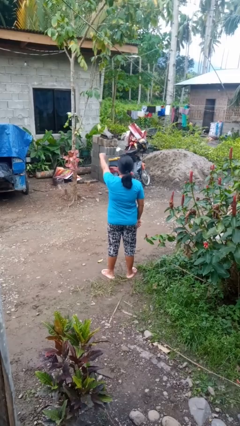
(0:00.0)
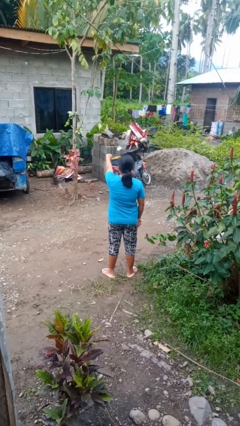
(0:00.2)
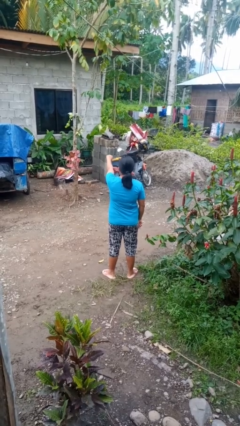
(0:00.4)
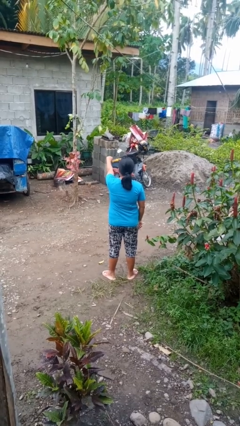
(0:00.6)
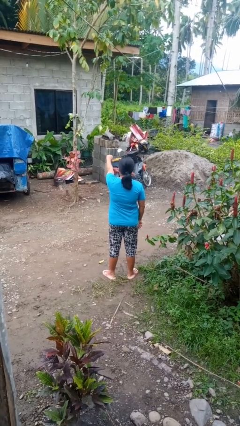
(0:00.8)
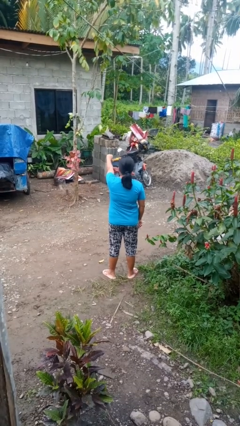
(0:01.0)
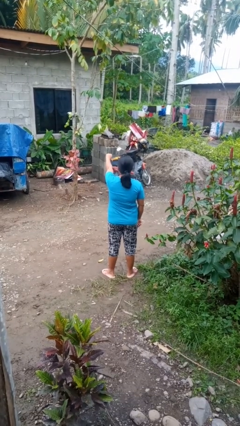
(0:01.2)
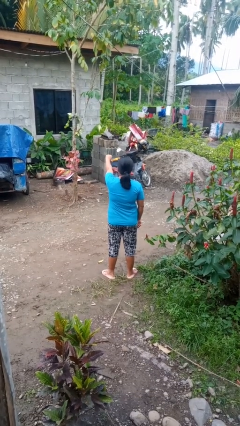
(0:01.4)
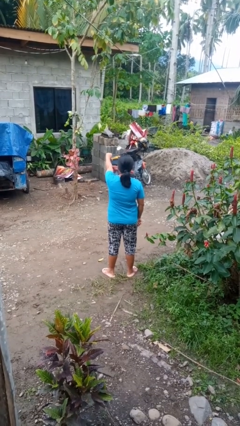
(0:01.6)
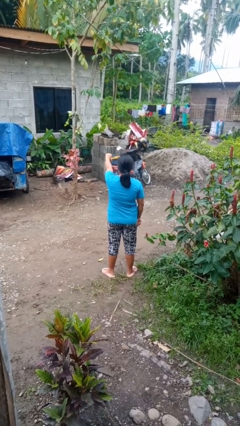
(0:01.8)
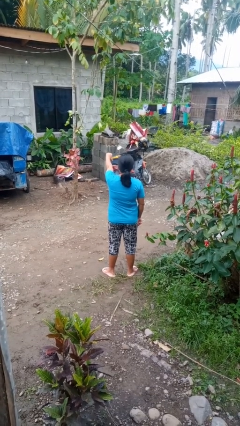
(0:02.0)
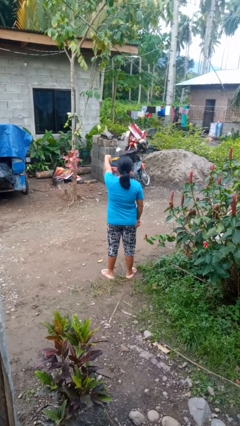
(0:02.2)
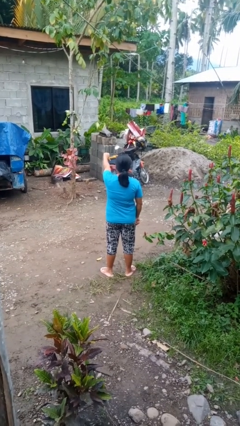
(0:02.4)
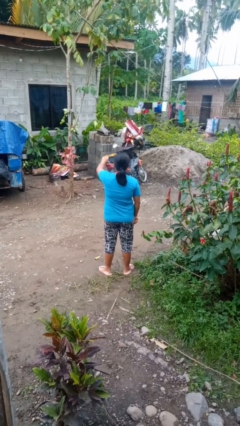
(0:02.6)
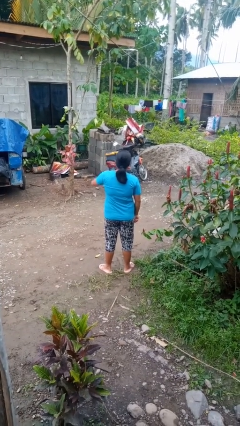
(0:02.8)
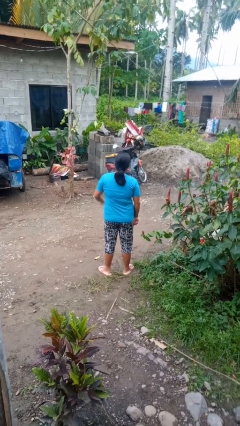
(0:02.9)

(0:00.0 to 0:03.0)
person gestures thumbs down

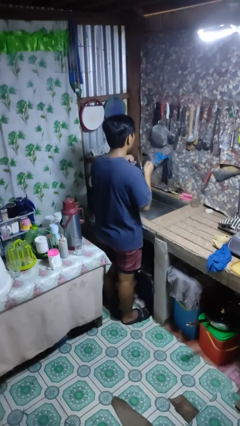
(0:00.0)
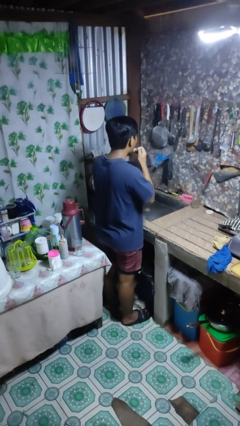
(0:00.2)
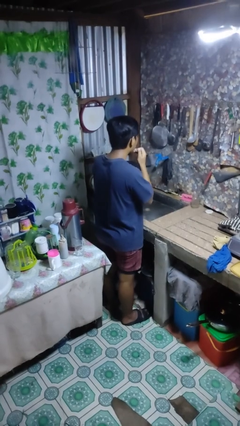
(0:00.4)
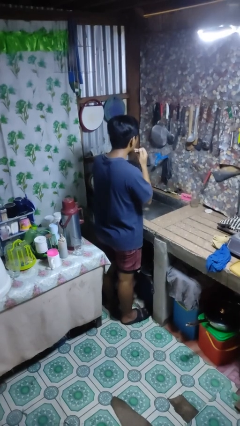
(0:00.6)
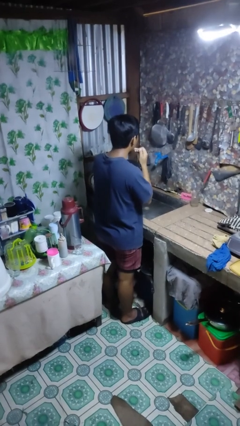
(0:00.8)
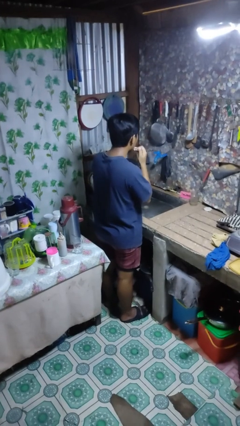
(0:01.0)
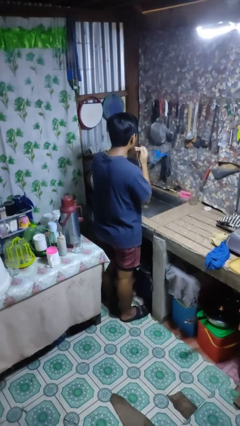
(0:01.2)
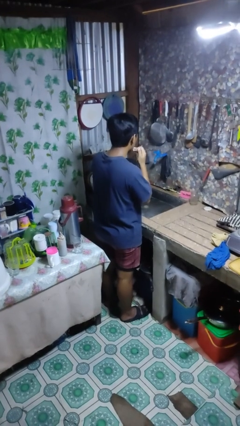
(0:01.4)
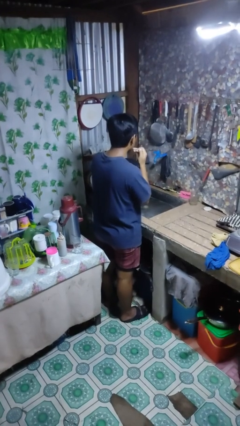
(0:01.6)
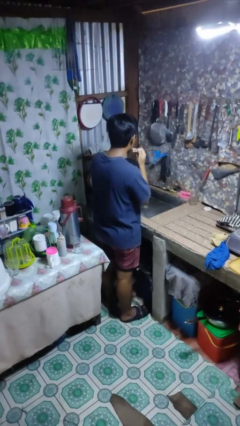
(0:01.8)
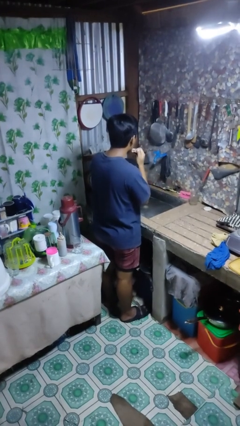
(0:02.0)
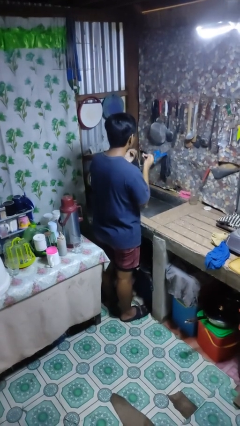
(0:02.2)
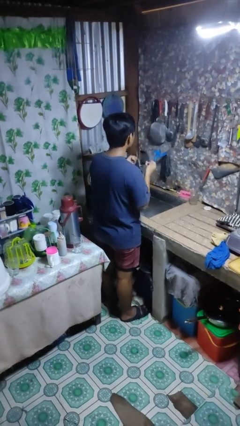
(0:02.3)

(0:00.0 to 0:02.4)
person flosses

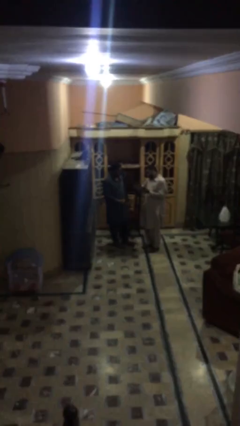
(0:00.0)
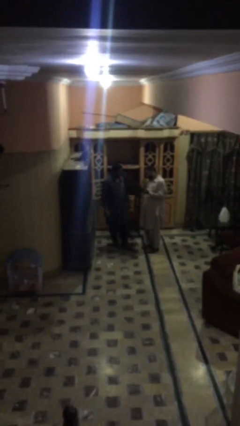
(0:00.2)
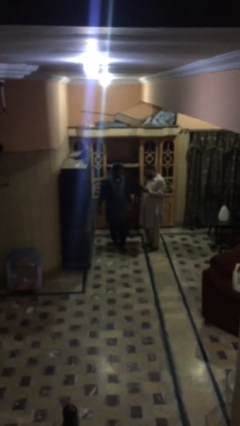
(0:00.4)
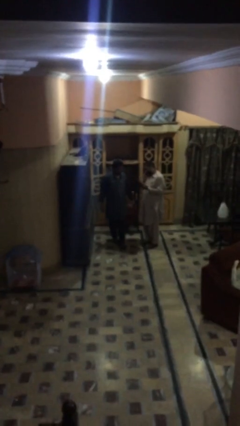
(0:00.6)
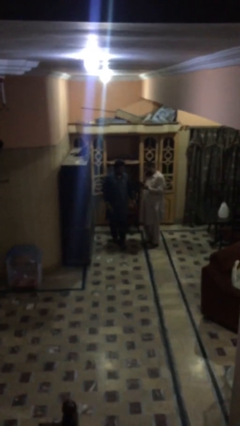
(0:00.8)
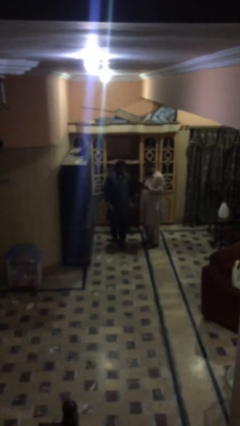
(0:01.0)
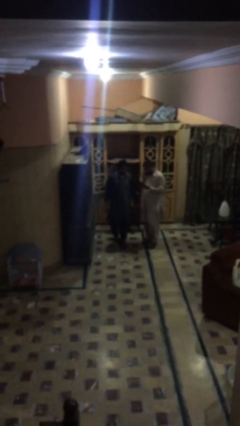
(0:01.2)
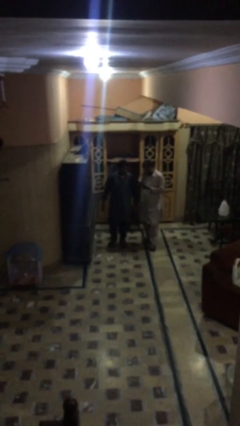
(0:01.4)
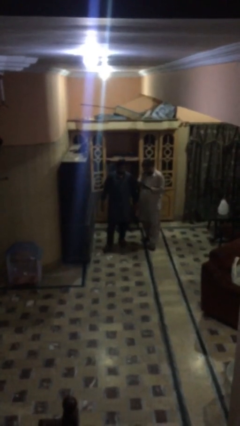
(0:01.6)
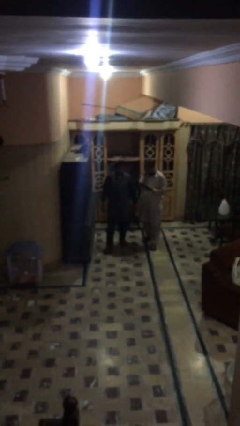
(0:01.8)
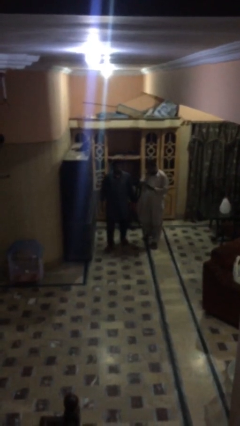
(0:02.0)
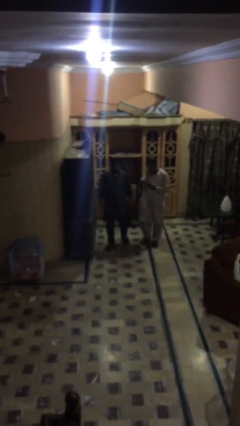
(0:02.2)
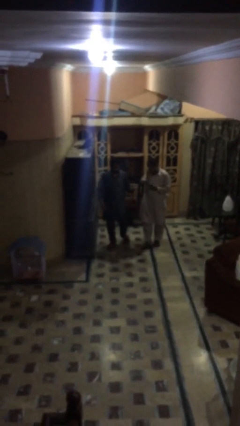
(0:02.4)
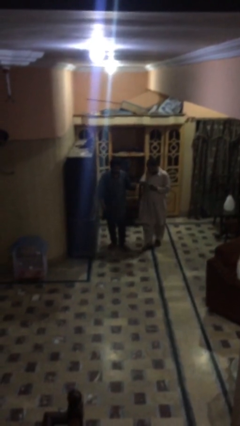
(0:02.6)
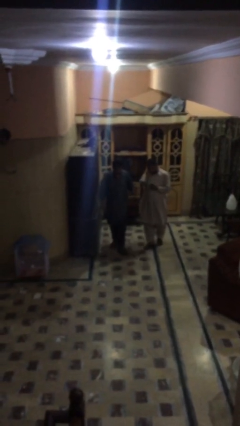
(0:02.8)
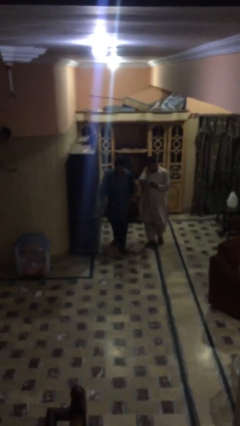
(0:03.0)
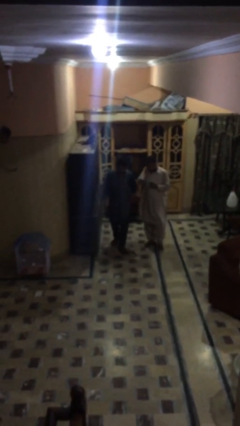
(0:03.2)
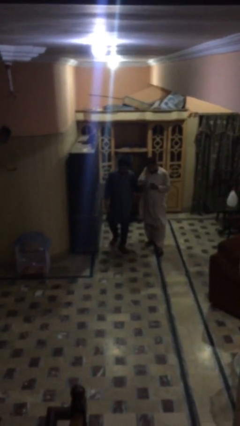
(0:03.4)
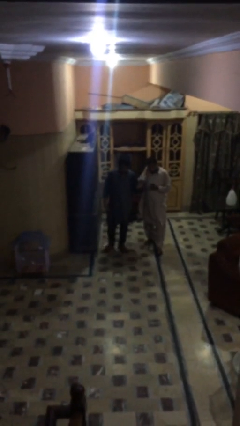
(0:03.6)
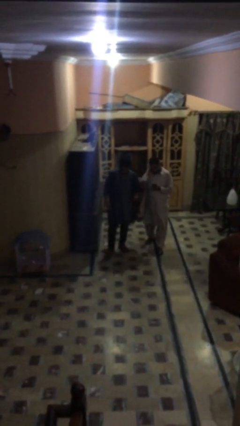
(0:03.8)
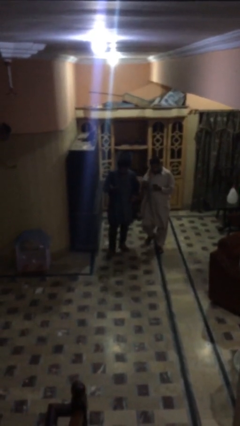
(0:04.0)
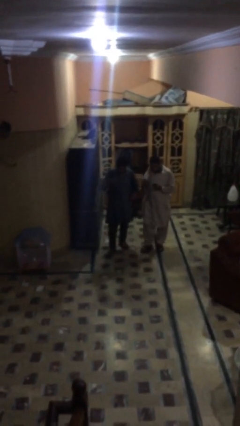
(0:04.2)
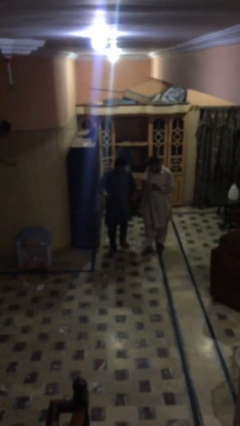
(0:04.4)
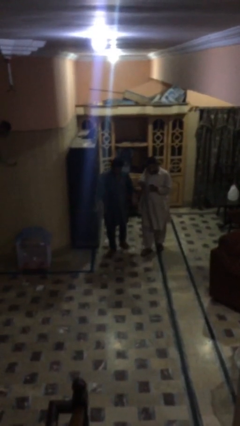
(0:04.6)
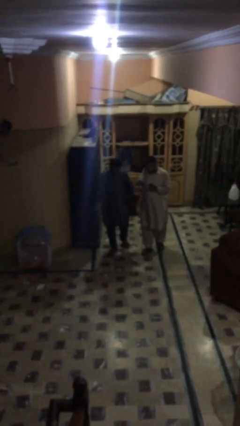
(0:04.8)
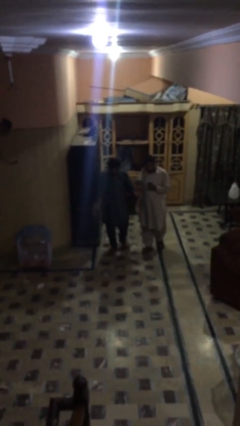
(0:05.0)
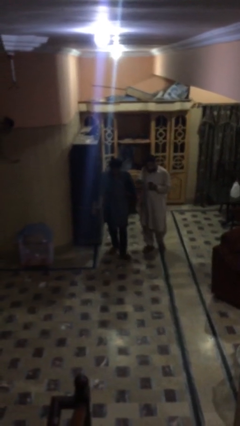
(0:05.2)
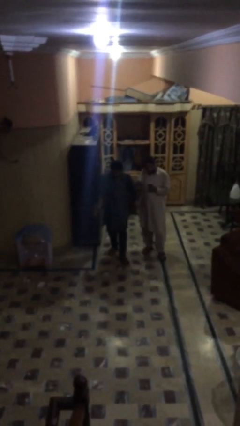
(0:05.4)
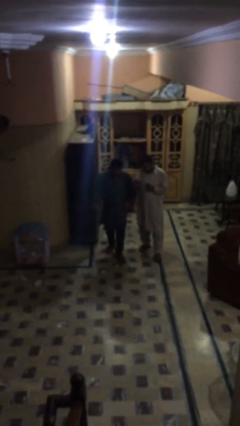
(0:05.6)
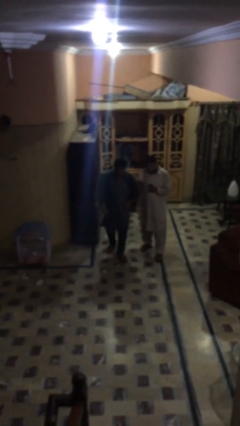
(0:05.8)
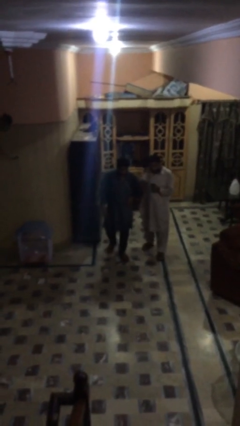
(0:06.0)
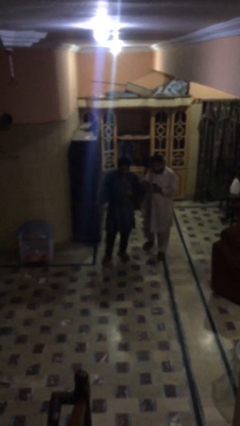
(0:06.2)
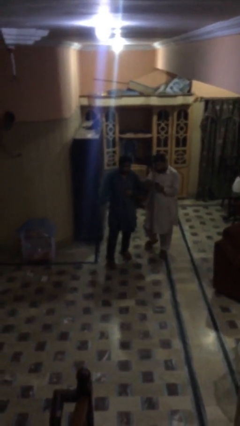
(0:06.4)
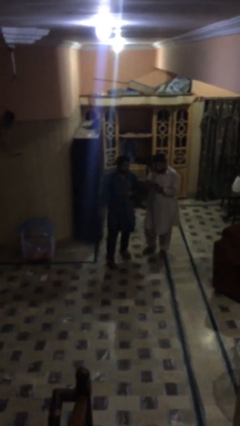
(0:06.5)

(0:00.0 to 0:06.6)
person talks to person

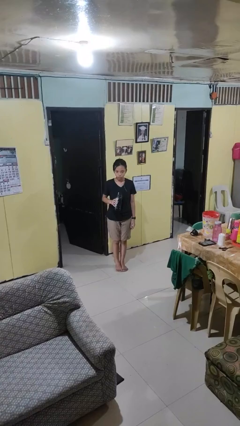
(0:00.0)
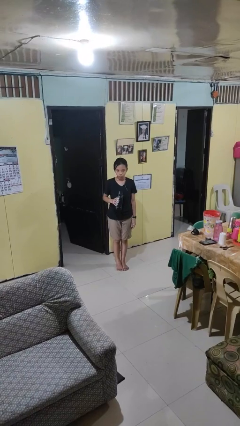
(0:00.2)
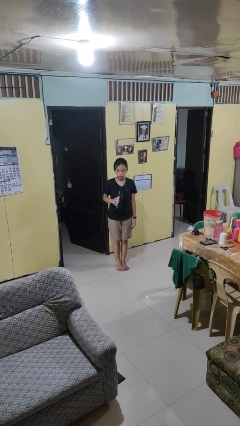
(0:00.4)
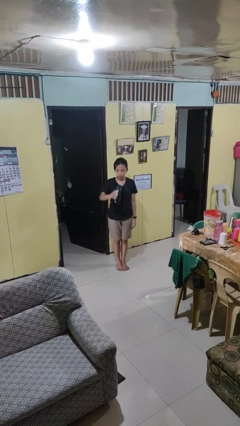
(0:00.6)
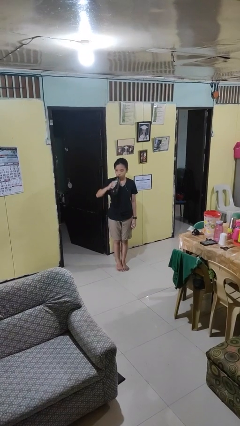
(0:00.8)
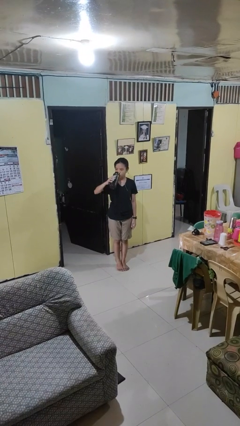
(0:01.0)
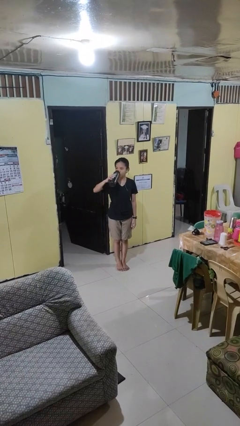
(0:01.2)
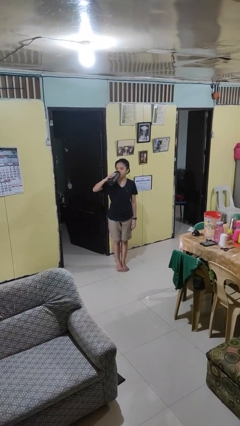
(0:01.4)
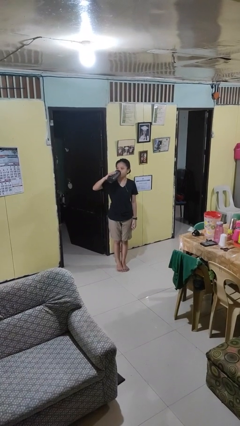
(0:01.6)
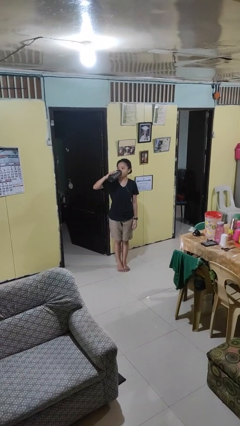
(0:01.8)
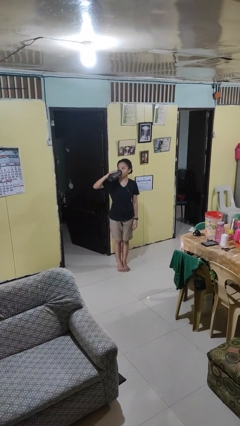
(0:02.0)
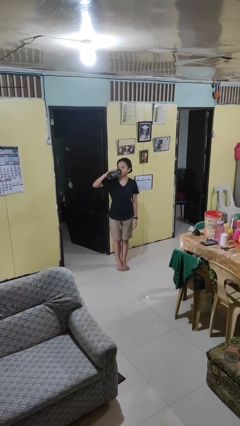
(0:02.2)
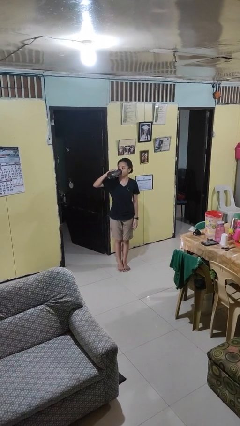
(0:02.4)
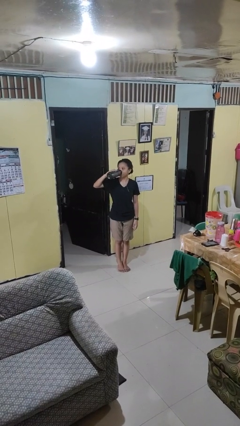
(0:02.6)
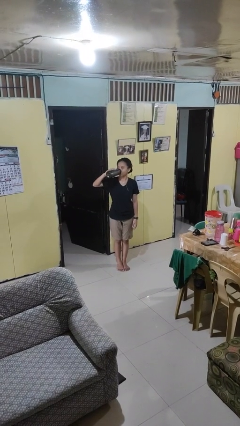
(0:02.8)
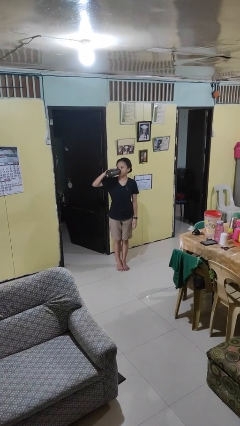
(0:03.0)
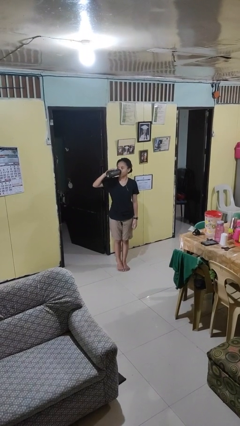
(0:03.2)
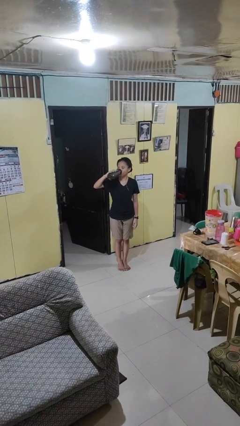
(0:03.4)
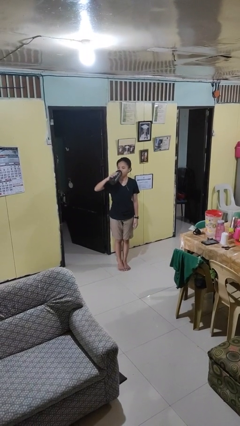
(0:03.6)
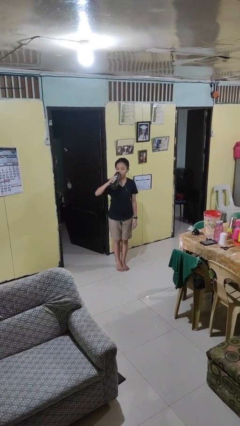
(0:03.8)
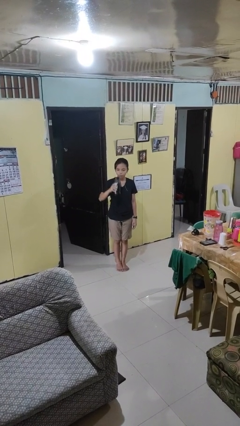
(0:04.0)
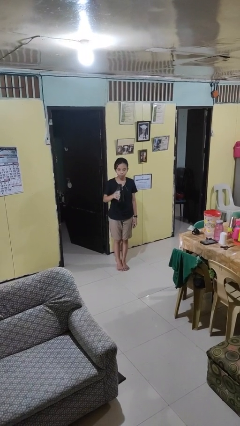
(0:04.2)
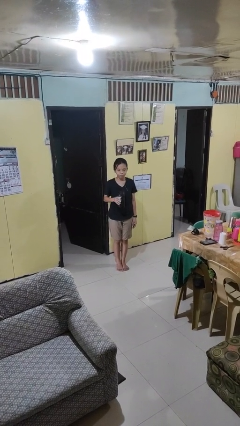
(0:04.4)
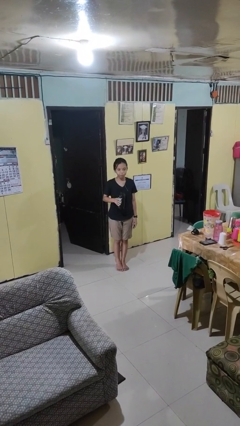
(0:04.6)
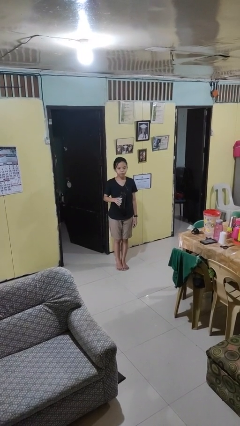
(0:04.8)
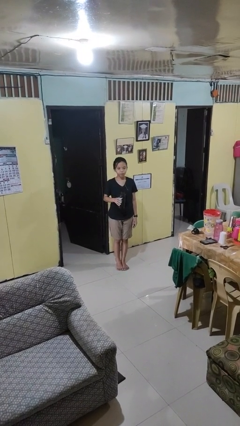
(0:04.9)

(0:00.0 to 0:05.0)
person drinks from bottle
